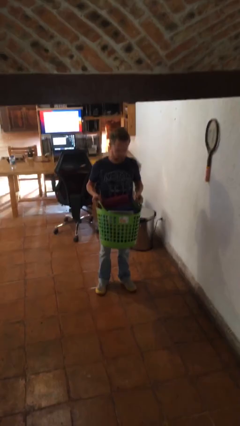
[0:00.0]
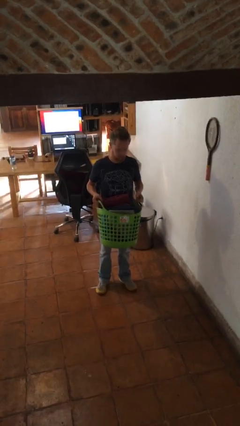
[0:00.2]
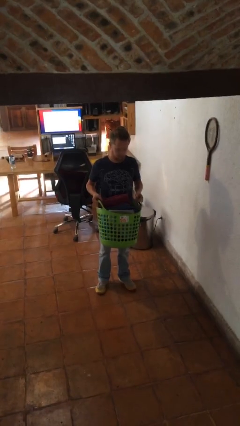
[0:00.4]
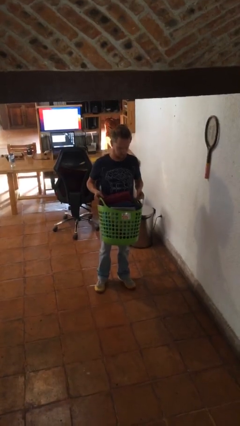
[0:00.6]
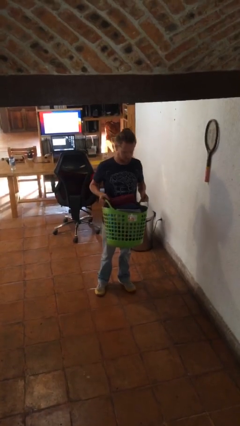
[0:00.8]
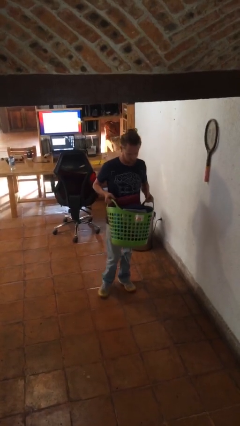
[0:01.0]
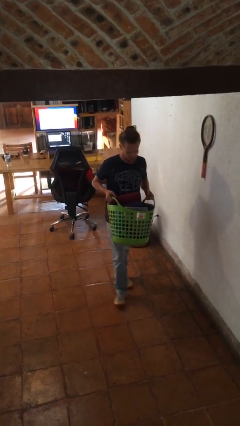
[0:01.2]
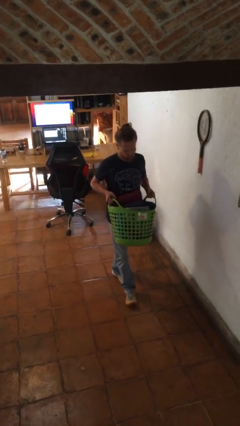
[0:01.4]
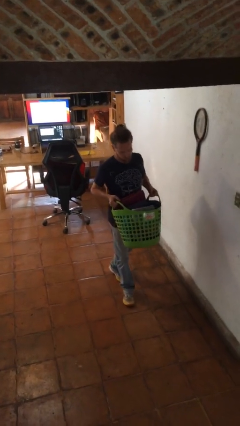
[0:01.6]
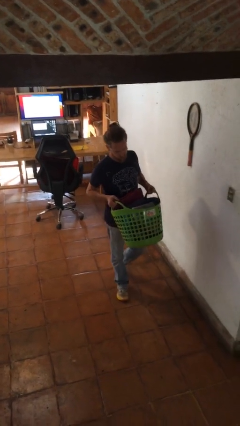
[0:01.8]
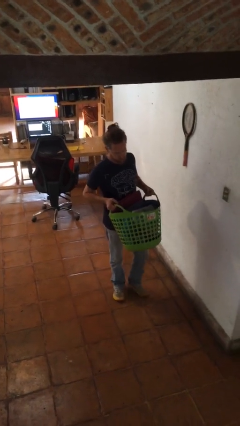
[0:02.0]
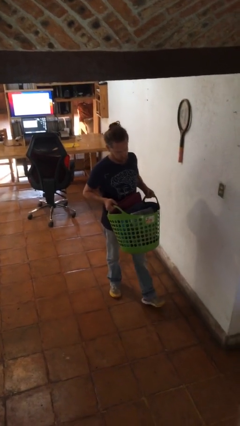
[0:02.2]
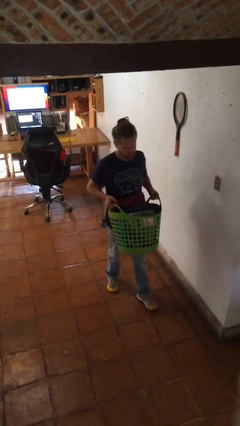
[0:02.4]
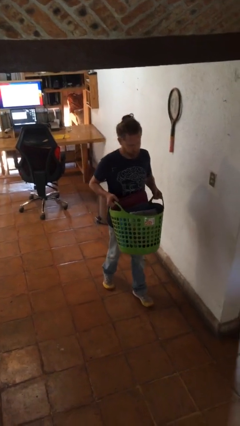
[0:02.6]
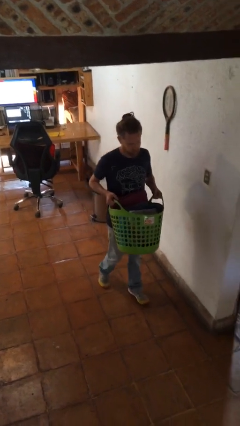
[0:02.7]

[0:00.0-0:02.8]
person carries laundry basket

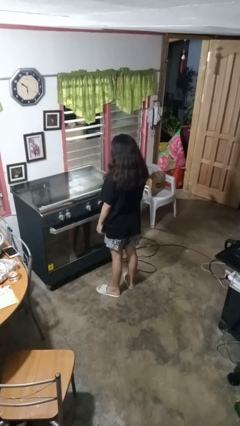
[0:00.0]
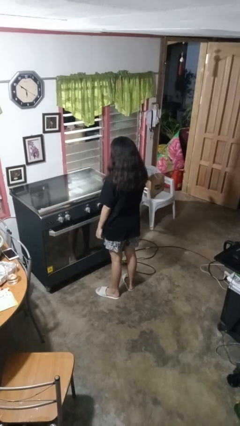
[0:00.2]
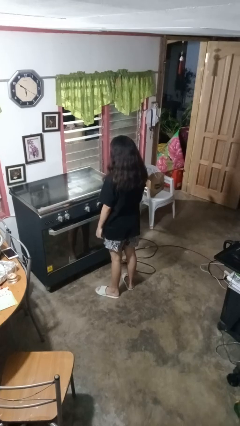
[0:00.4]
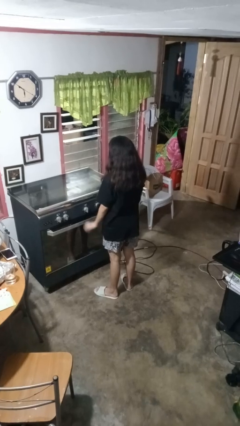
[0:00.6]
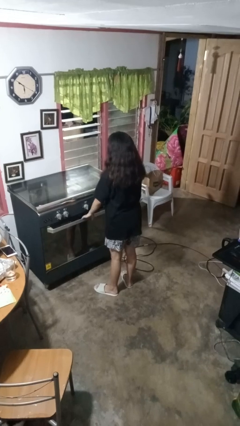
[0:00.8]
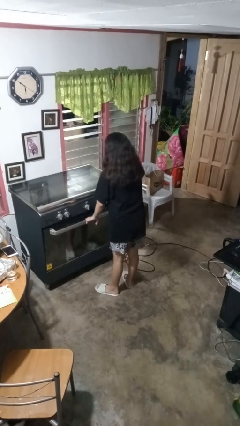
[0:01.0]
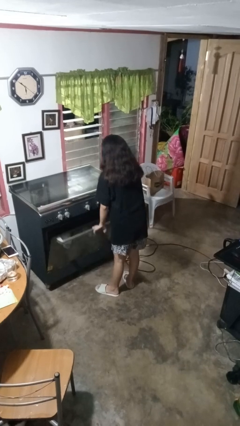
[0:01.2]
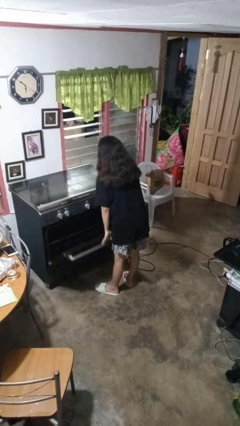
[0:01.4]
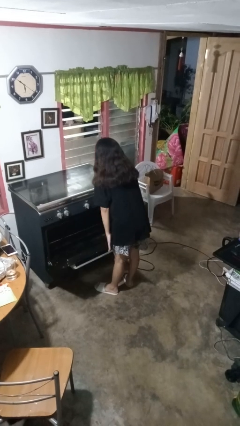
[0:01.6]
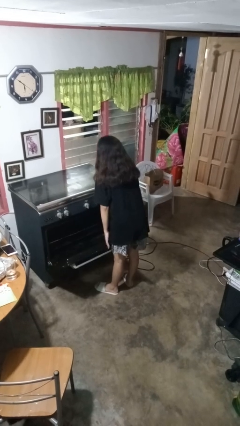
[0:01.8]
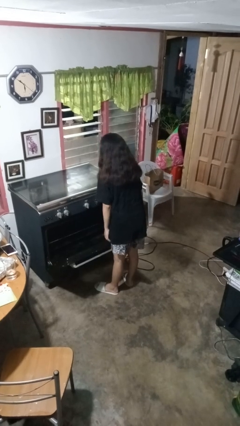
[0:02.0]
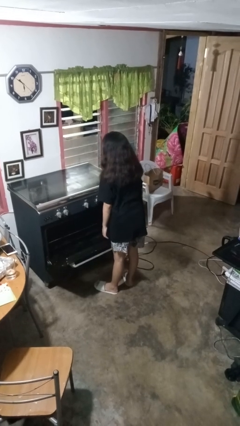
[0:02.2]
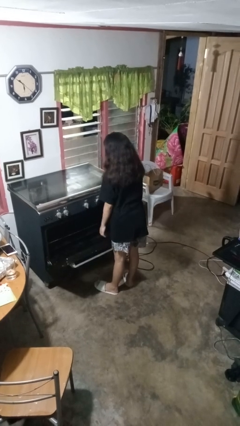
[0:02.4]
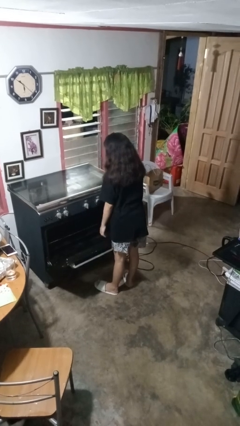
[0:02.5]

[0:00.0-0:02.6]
person opens oven door

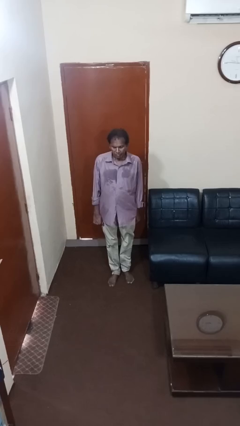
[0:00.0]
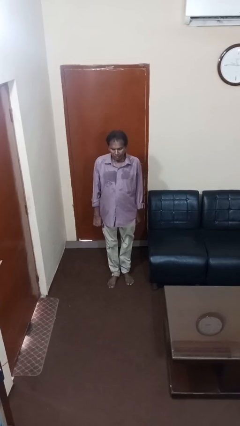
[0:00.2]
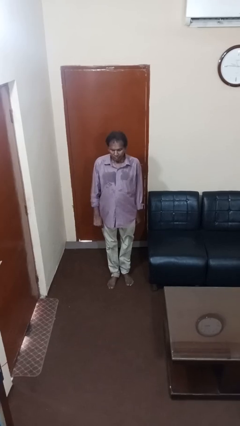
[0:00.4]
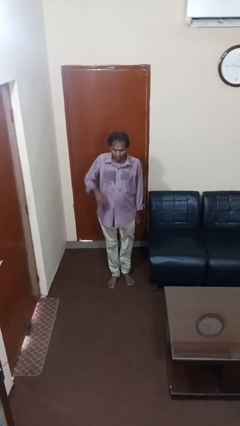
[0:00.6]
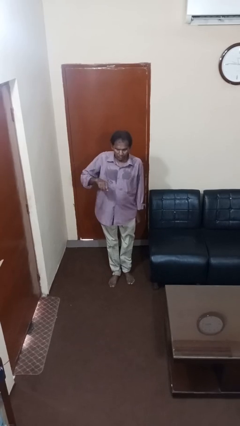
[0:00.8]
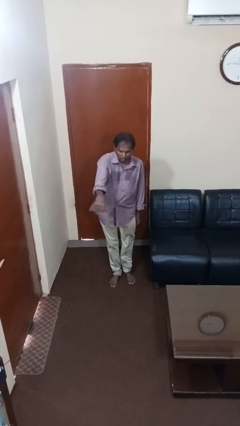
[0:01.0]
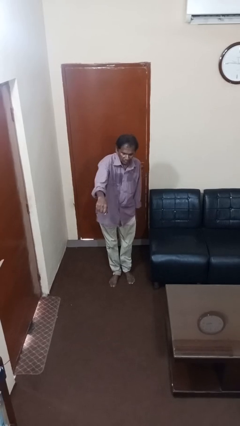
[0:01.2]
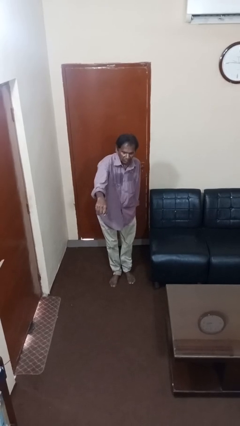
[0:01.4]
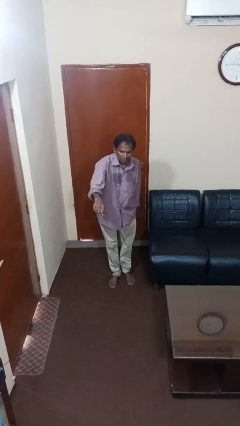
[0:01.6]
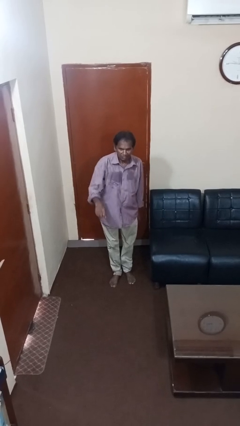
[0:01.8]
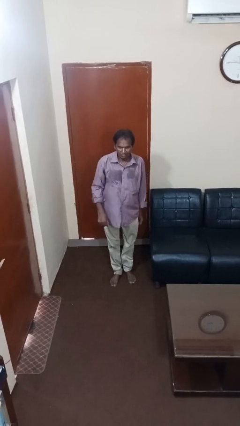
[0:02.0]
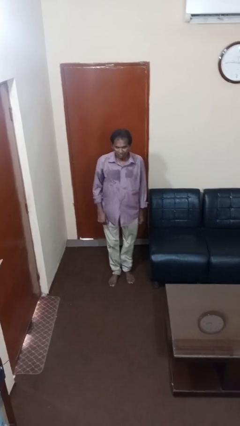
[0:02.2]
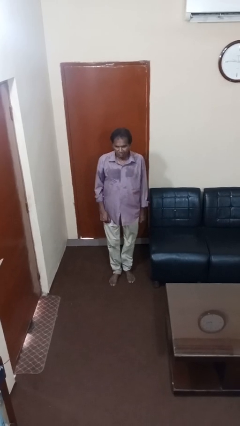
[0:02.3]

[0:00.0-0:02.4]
person karate chop

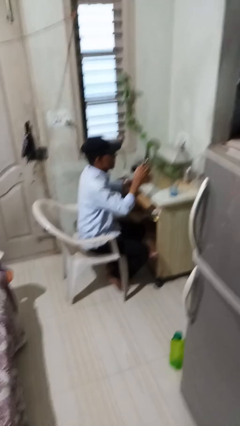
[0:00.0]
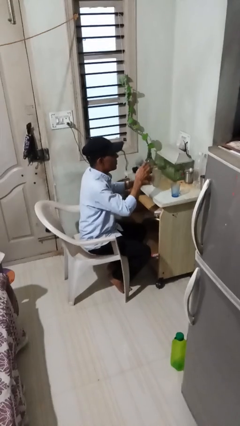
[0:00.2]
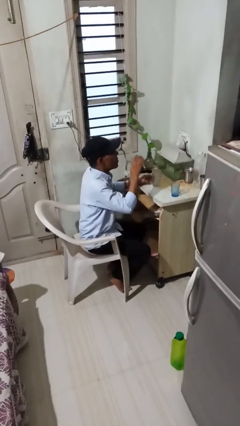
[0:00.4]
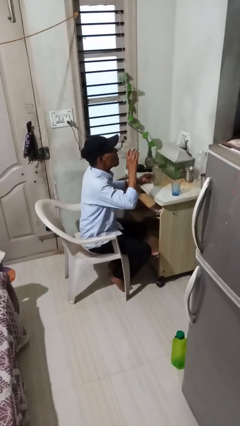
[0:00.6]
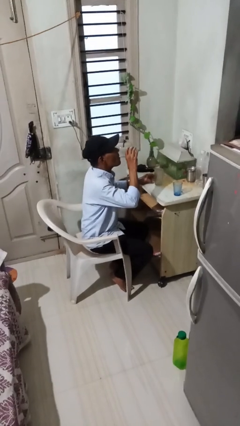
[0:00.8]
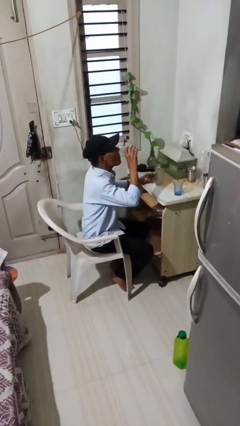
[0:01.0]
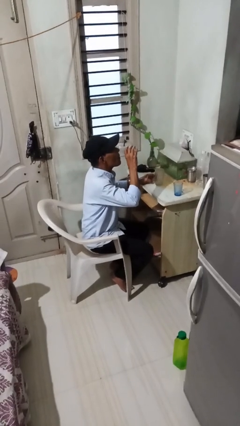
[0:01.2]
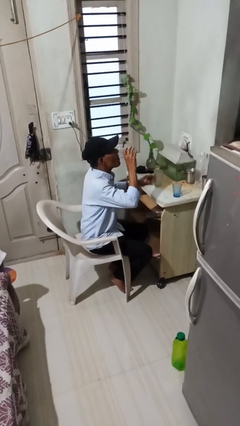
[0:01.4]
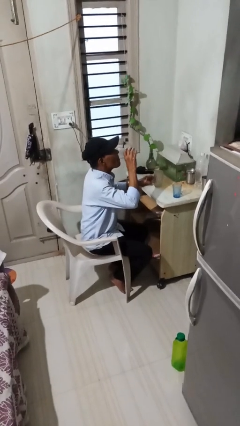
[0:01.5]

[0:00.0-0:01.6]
person drinks from shotglass

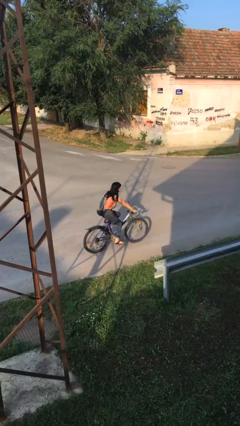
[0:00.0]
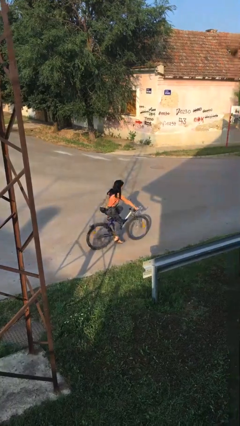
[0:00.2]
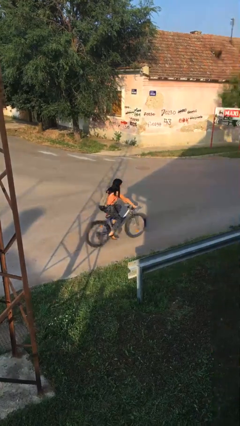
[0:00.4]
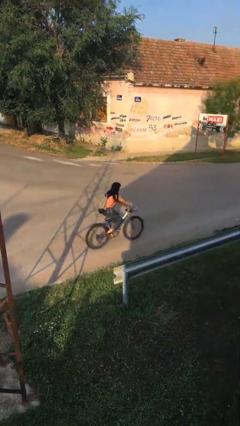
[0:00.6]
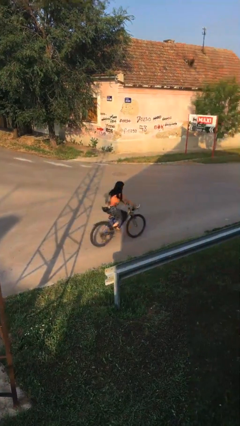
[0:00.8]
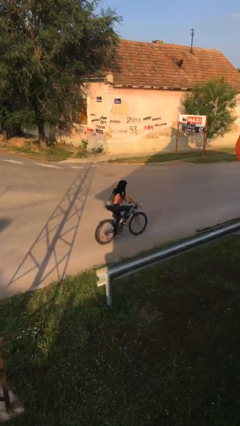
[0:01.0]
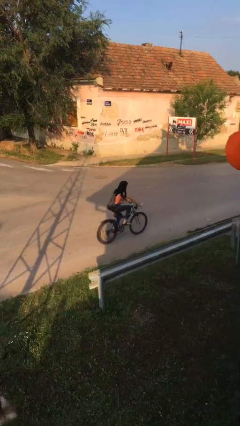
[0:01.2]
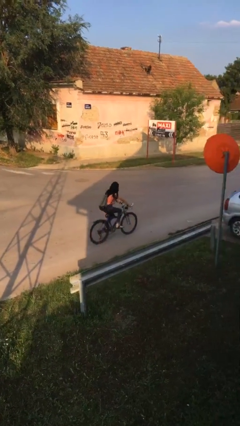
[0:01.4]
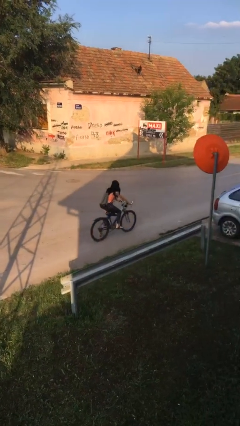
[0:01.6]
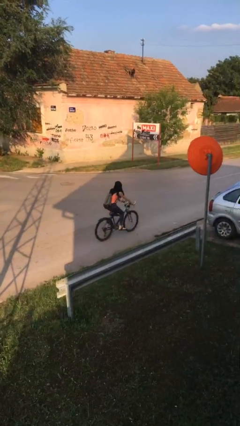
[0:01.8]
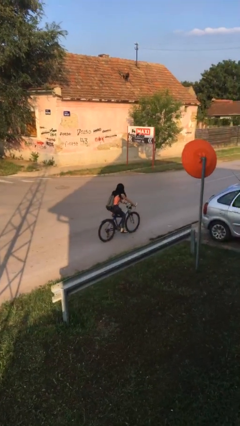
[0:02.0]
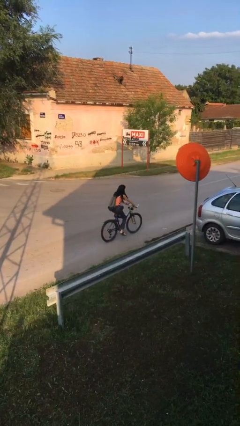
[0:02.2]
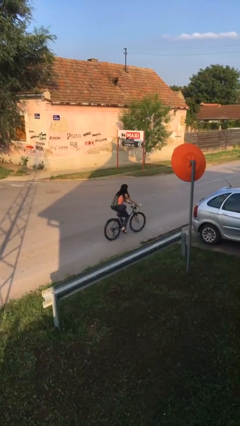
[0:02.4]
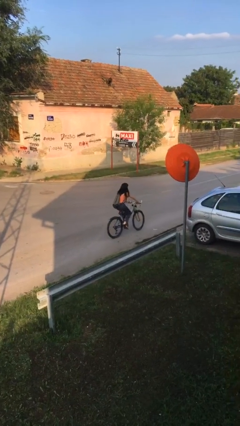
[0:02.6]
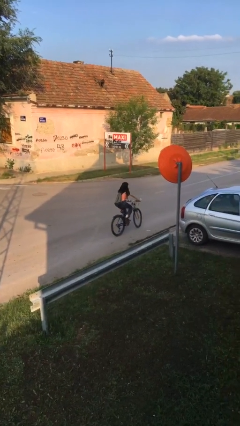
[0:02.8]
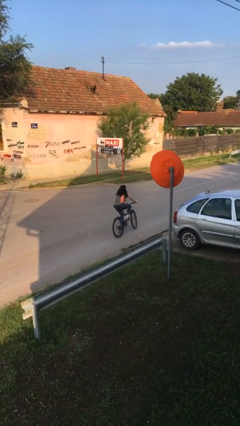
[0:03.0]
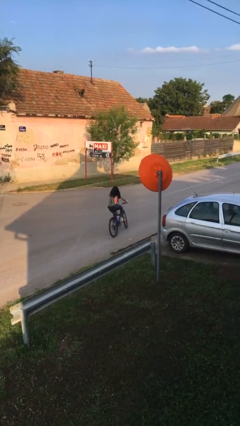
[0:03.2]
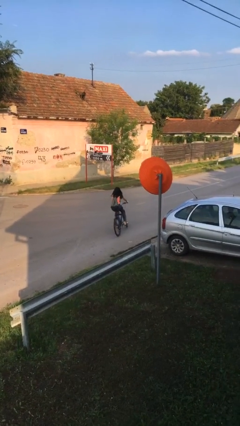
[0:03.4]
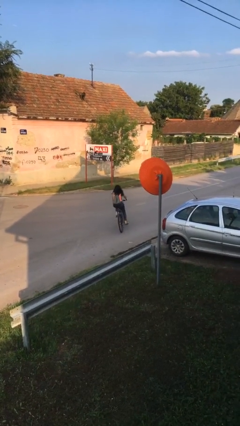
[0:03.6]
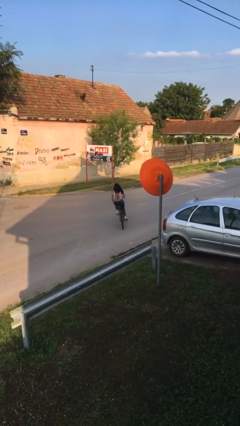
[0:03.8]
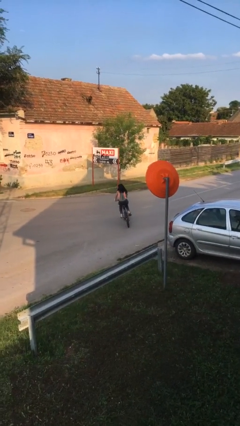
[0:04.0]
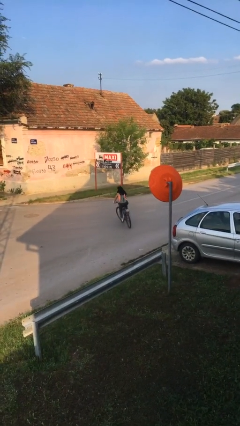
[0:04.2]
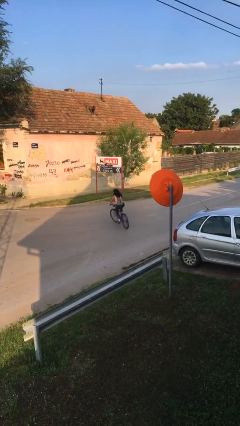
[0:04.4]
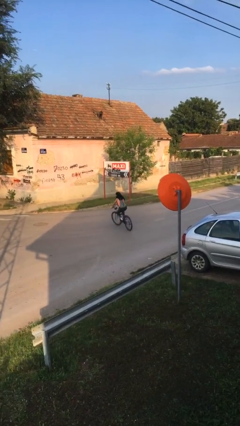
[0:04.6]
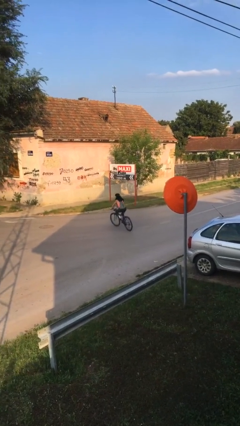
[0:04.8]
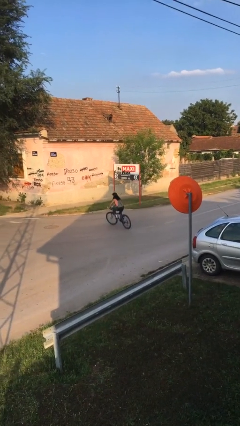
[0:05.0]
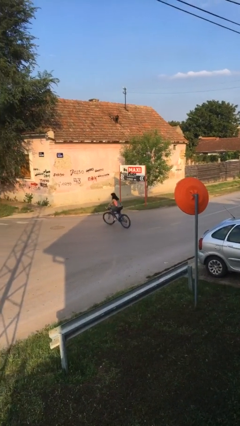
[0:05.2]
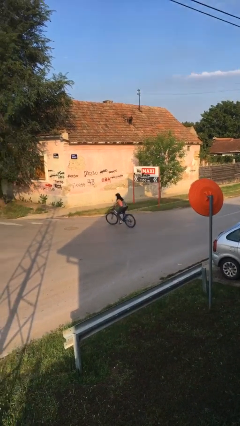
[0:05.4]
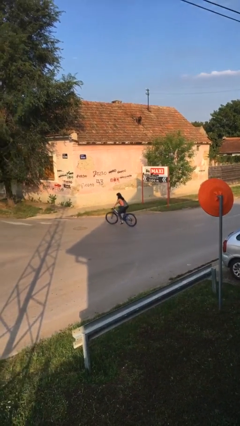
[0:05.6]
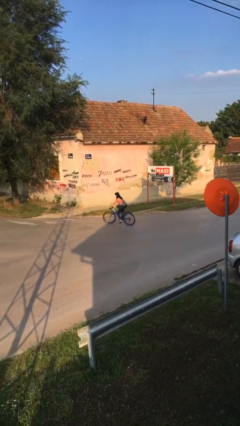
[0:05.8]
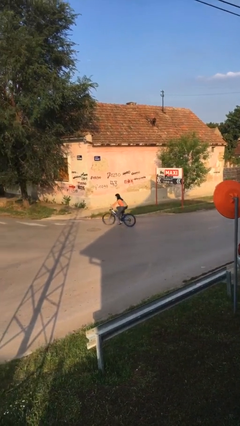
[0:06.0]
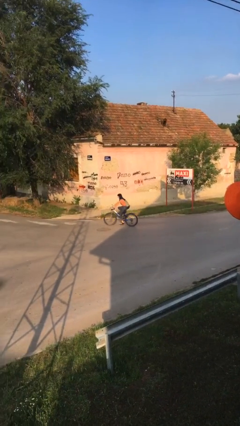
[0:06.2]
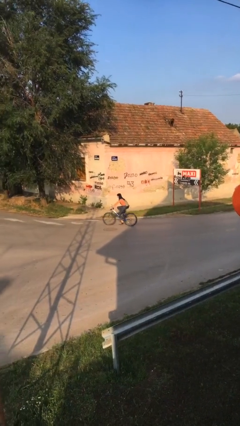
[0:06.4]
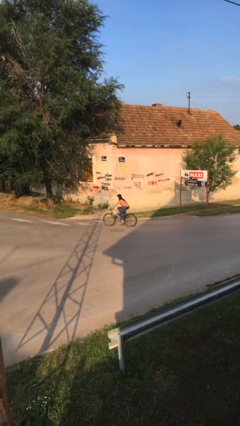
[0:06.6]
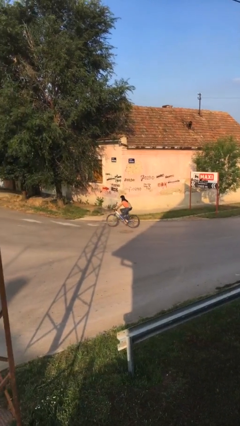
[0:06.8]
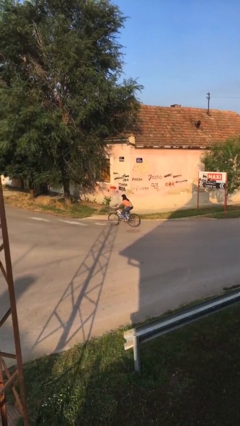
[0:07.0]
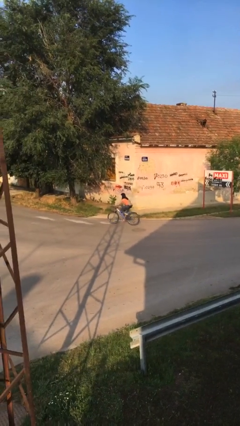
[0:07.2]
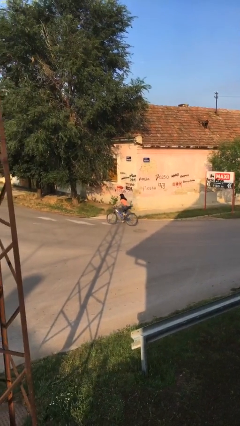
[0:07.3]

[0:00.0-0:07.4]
person rides bicycle

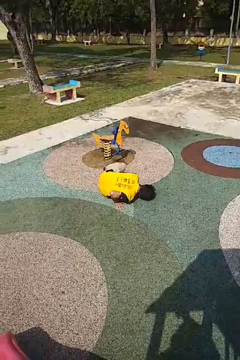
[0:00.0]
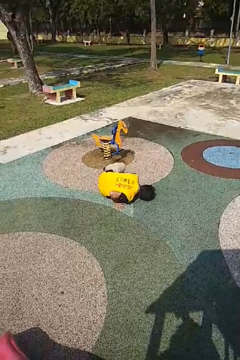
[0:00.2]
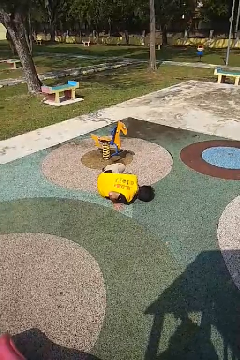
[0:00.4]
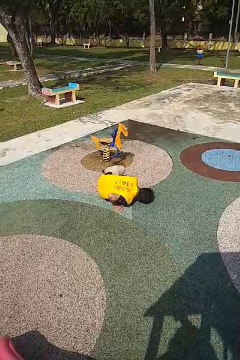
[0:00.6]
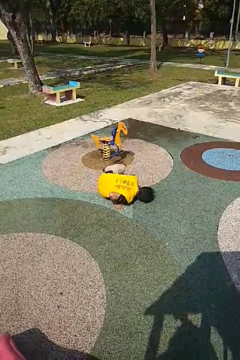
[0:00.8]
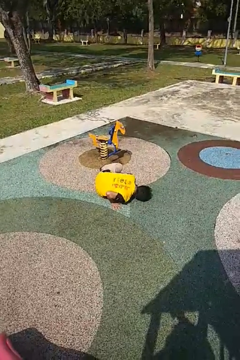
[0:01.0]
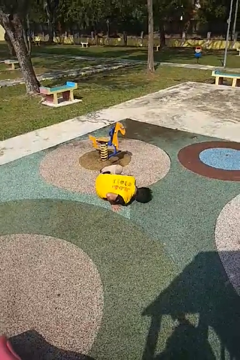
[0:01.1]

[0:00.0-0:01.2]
person lies down on floor
